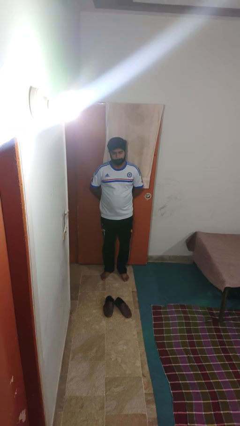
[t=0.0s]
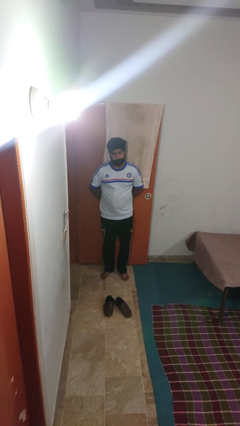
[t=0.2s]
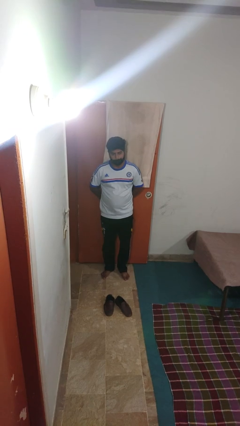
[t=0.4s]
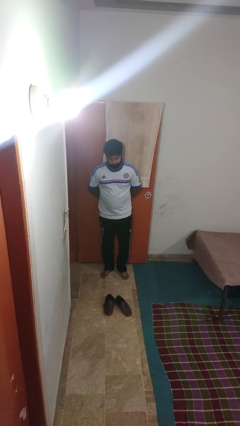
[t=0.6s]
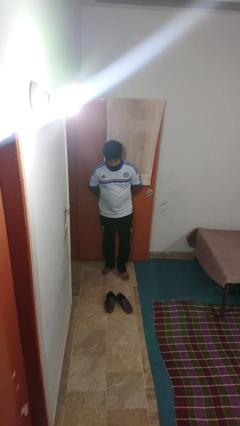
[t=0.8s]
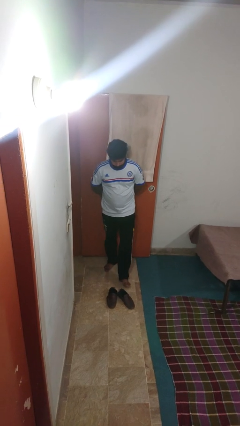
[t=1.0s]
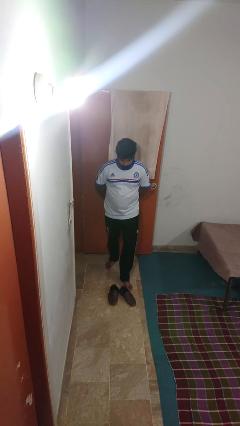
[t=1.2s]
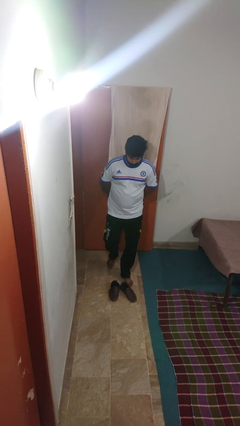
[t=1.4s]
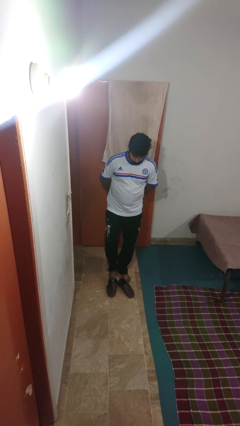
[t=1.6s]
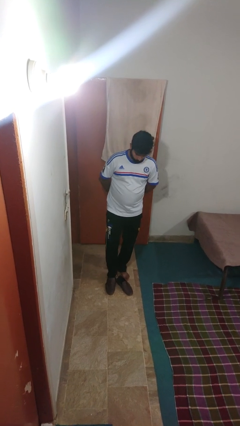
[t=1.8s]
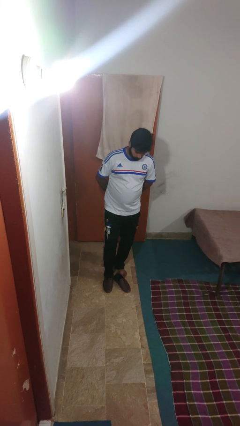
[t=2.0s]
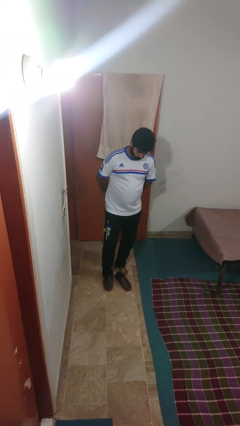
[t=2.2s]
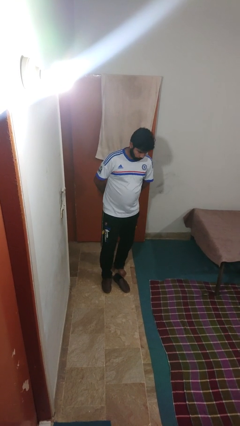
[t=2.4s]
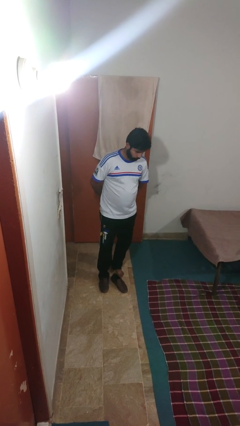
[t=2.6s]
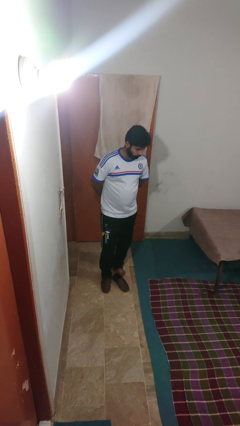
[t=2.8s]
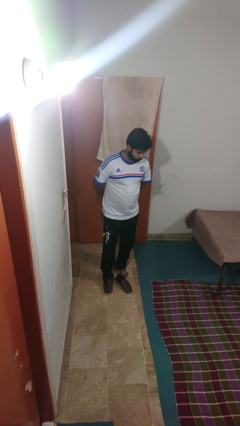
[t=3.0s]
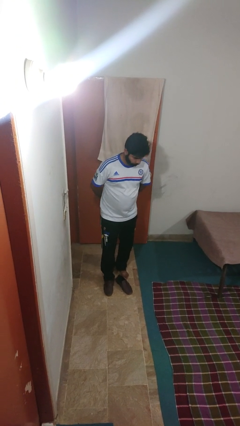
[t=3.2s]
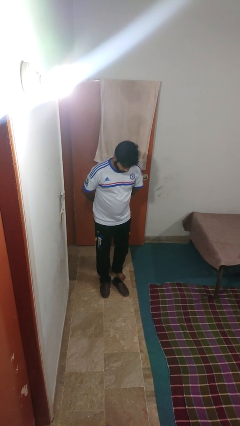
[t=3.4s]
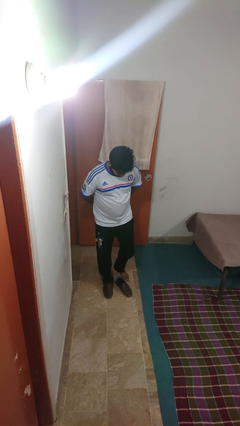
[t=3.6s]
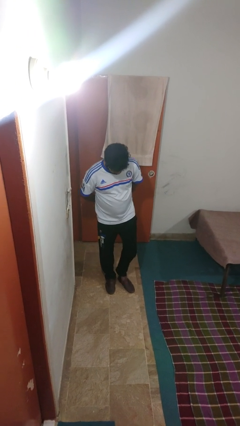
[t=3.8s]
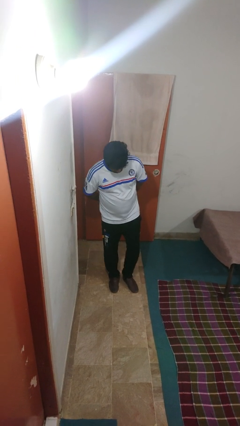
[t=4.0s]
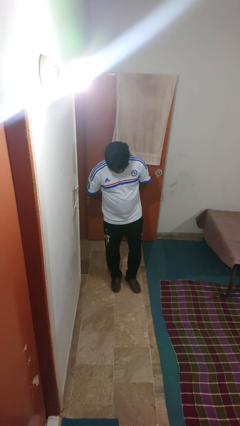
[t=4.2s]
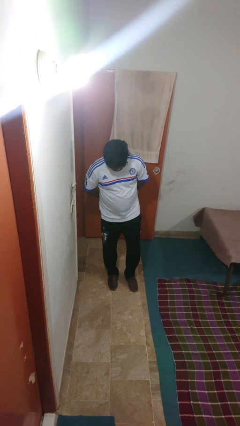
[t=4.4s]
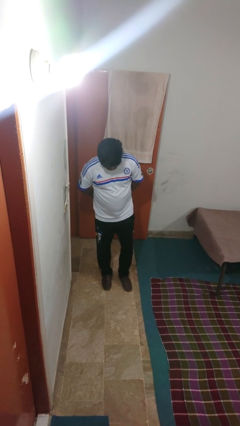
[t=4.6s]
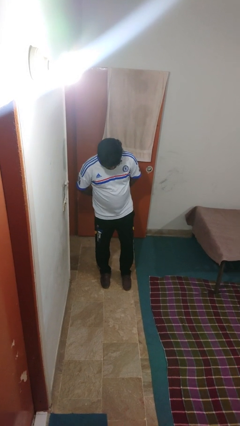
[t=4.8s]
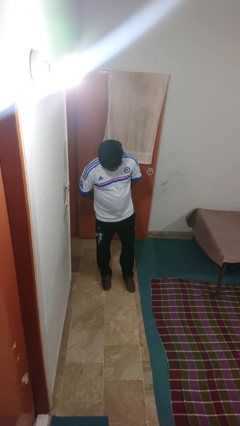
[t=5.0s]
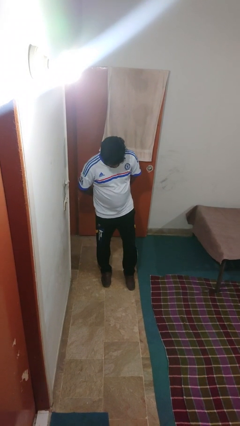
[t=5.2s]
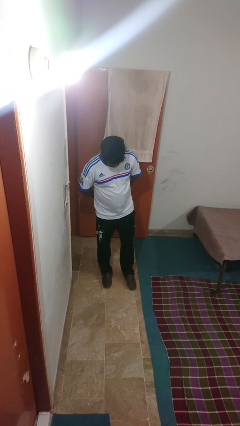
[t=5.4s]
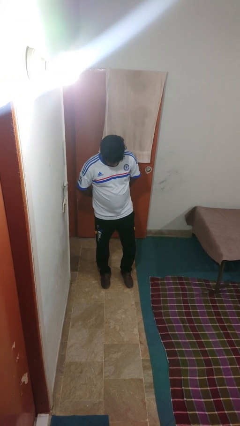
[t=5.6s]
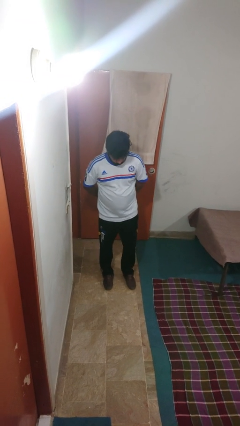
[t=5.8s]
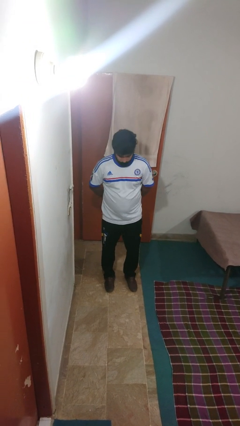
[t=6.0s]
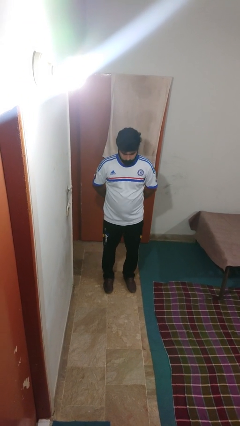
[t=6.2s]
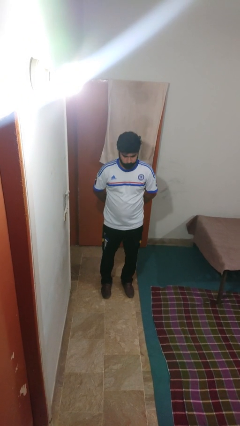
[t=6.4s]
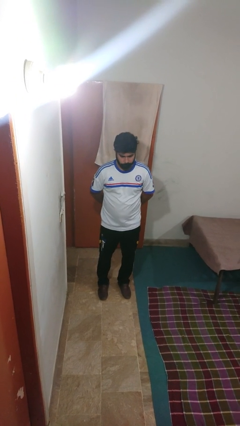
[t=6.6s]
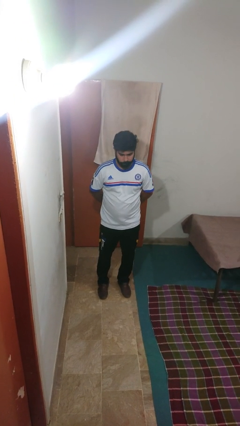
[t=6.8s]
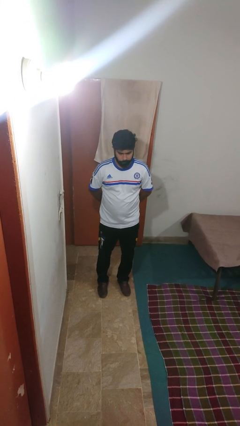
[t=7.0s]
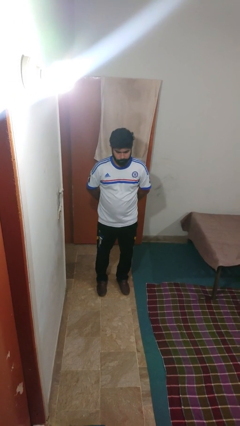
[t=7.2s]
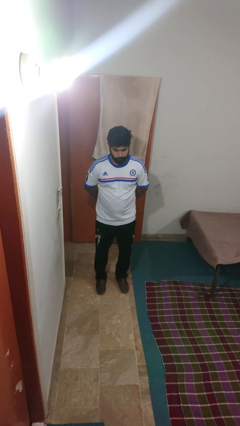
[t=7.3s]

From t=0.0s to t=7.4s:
person puts on shoes

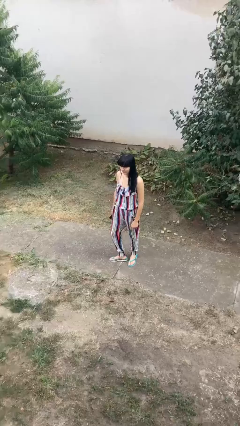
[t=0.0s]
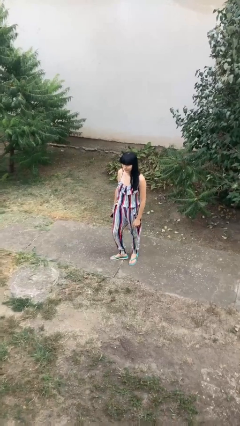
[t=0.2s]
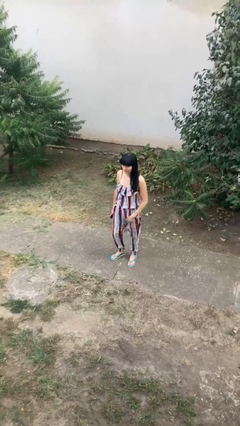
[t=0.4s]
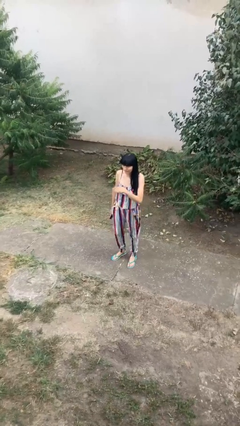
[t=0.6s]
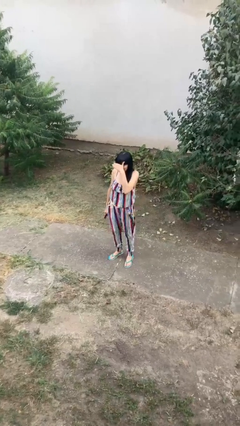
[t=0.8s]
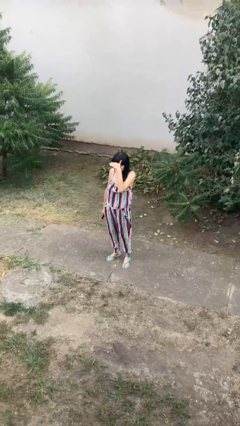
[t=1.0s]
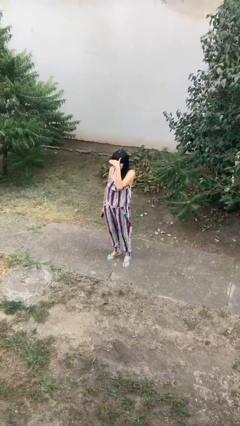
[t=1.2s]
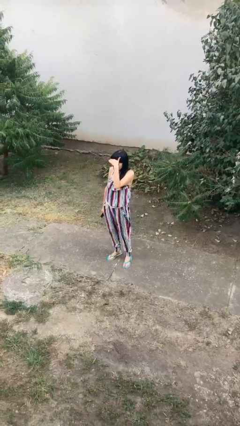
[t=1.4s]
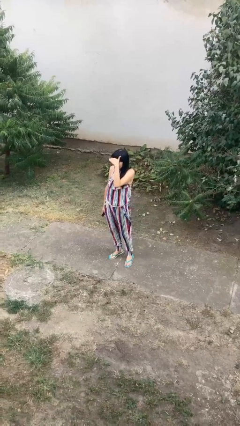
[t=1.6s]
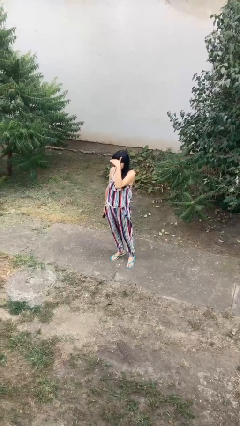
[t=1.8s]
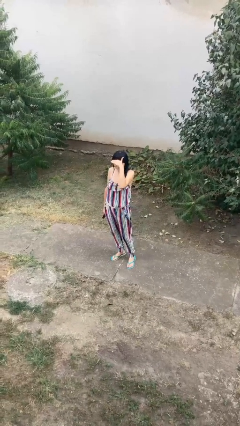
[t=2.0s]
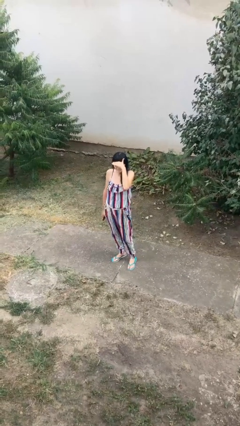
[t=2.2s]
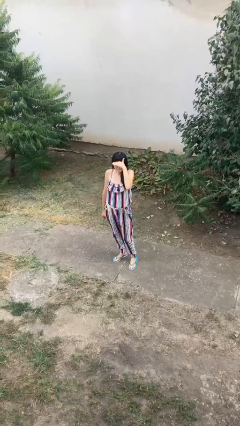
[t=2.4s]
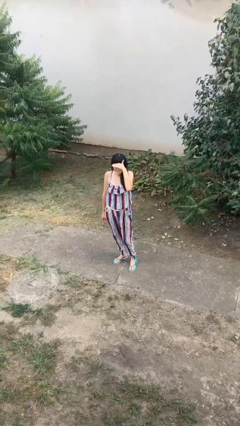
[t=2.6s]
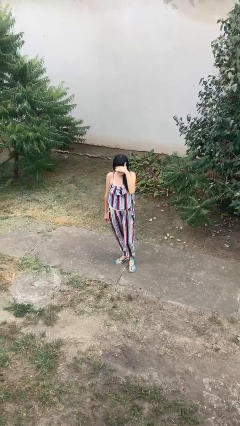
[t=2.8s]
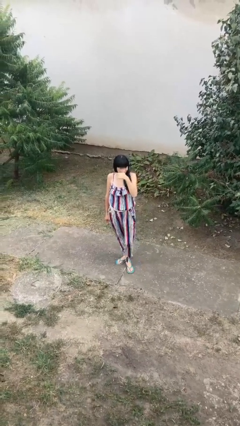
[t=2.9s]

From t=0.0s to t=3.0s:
person shades eyes

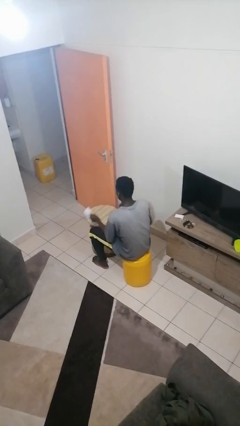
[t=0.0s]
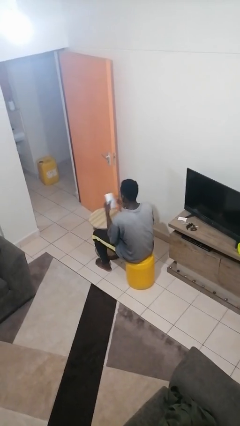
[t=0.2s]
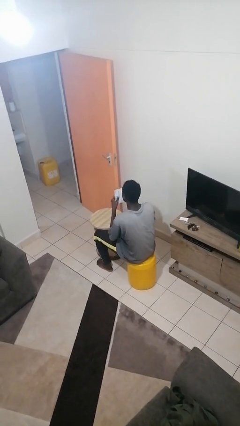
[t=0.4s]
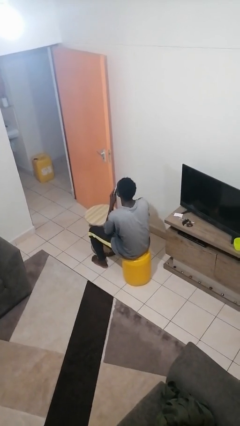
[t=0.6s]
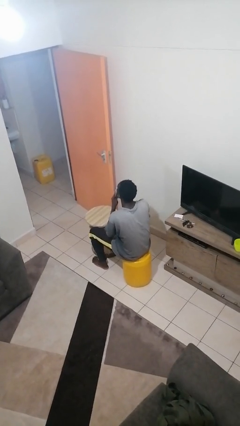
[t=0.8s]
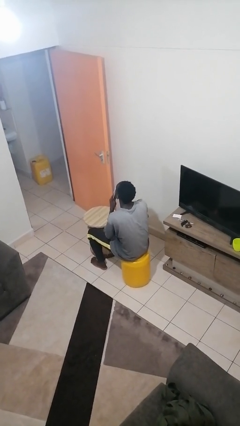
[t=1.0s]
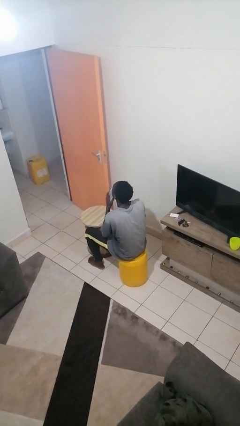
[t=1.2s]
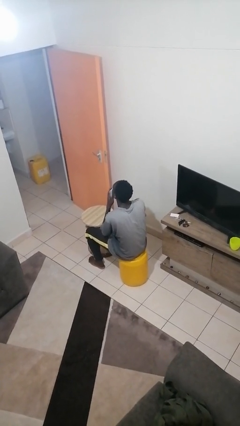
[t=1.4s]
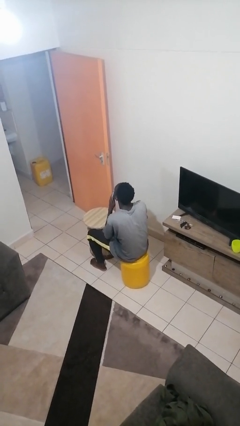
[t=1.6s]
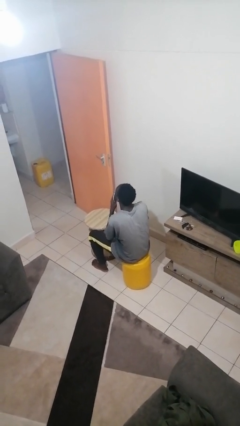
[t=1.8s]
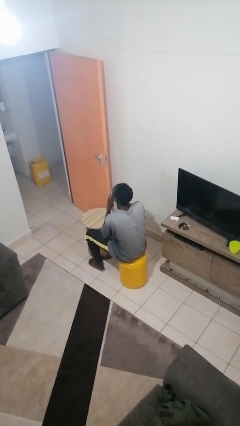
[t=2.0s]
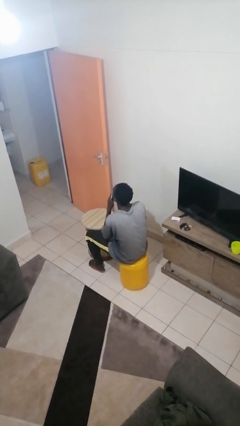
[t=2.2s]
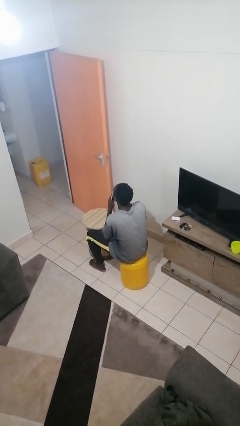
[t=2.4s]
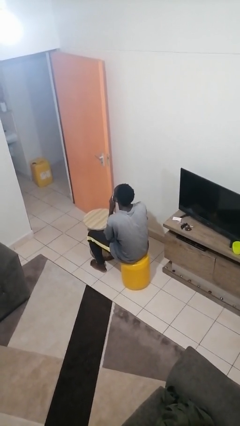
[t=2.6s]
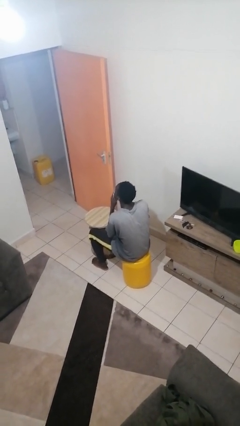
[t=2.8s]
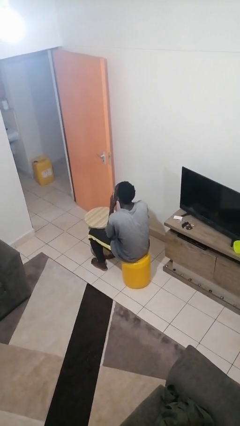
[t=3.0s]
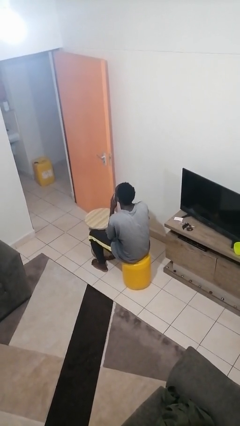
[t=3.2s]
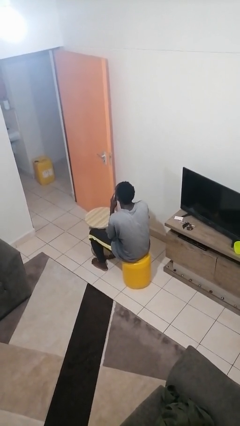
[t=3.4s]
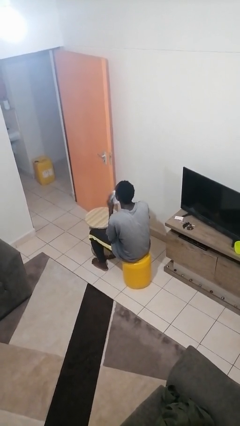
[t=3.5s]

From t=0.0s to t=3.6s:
person wipes mouth with napkin

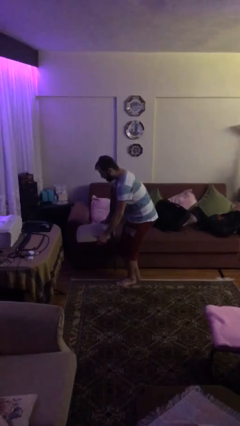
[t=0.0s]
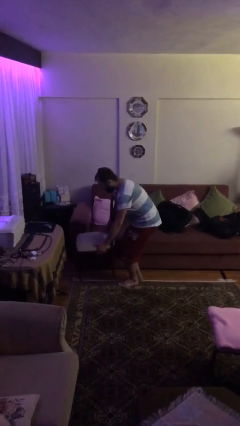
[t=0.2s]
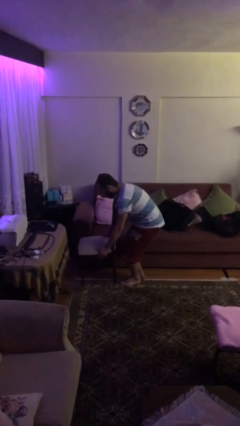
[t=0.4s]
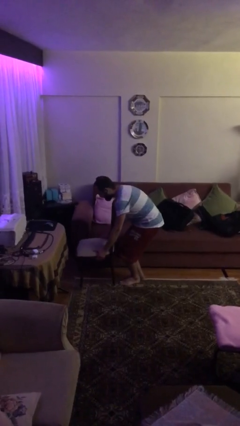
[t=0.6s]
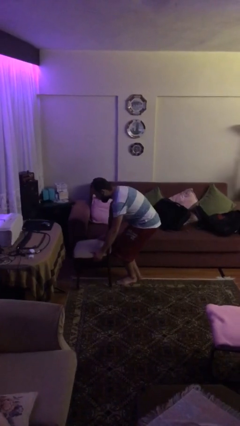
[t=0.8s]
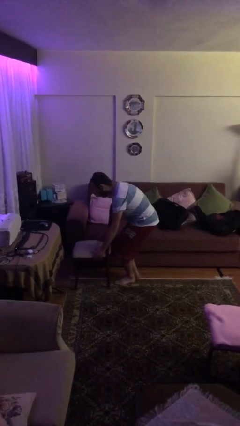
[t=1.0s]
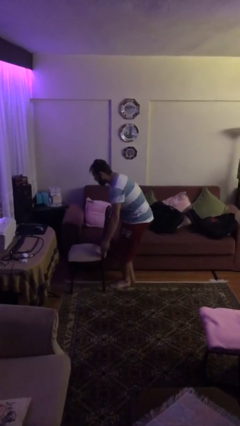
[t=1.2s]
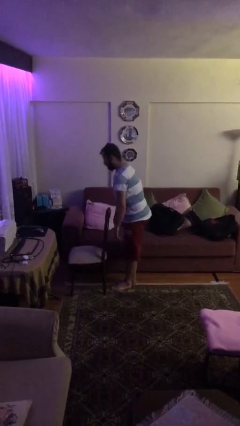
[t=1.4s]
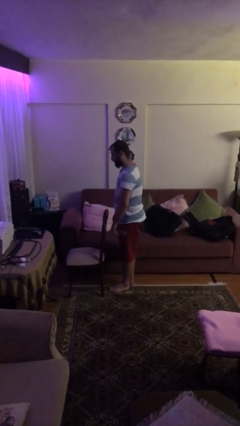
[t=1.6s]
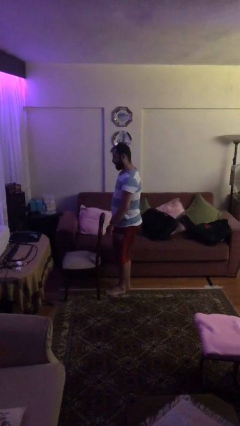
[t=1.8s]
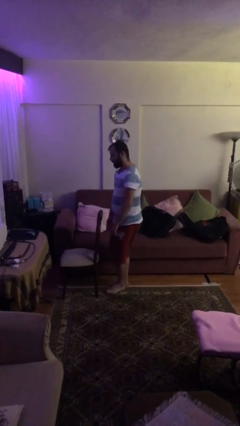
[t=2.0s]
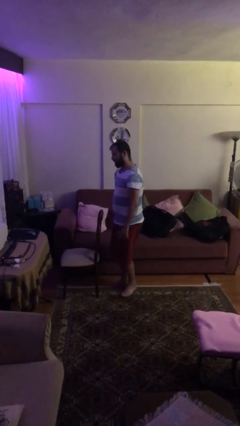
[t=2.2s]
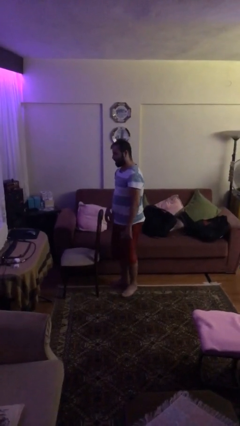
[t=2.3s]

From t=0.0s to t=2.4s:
person puts down object on floor

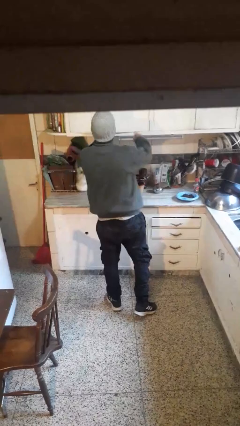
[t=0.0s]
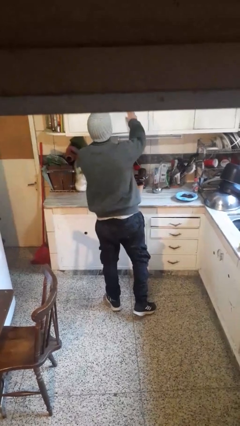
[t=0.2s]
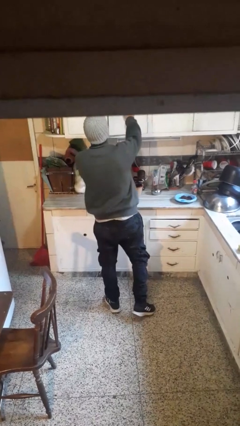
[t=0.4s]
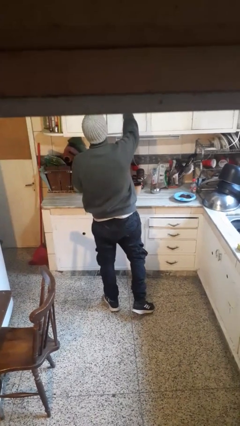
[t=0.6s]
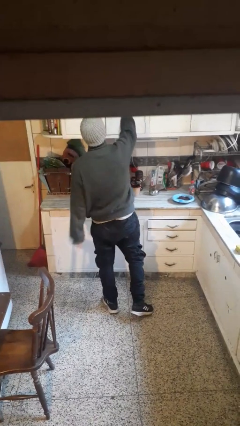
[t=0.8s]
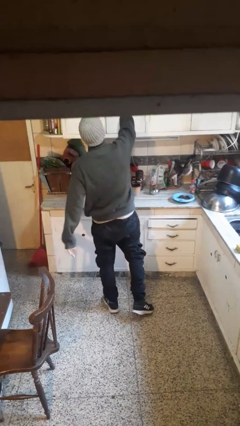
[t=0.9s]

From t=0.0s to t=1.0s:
person closes cabinet
